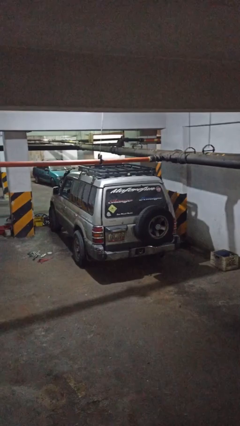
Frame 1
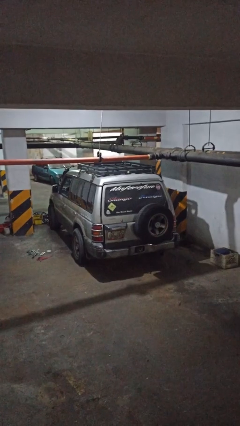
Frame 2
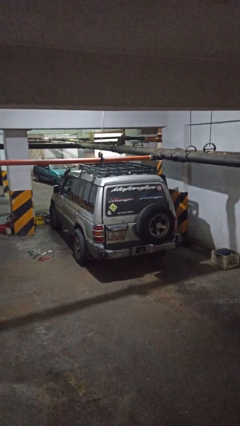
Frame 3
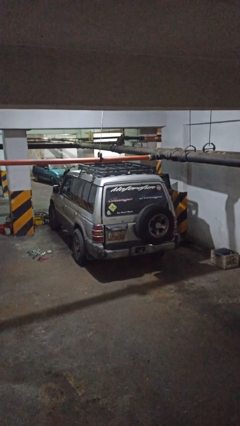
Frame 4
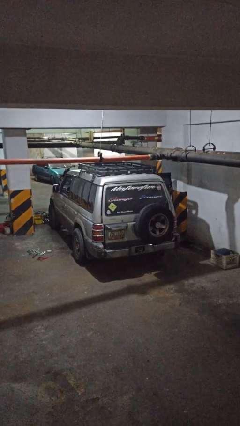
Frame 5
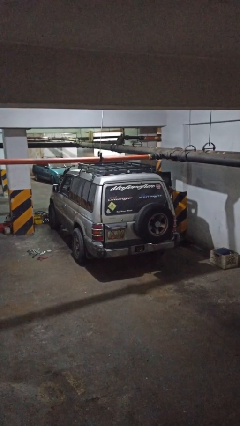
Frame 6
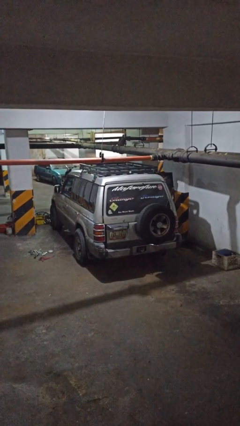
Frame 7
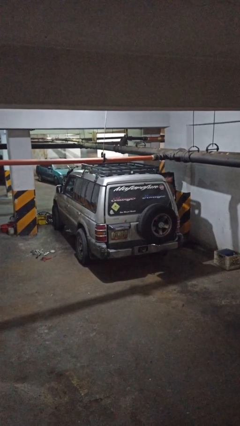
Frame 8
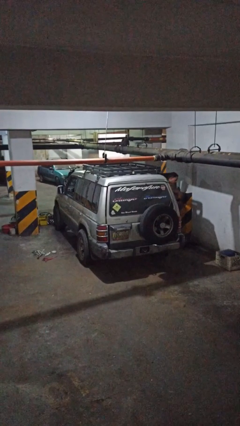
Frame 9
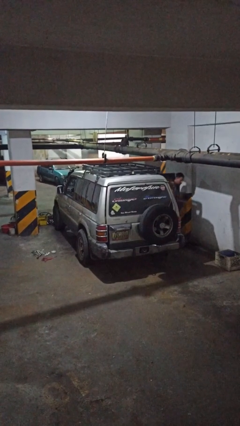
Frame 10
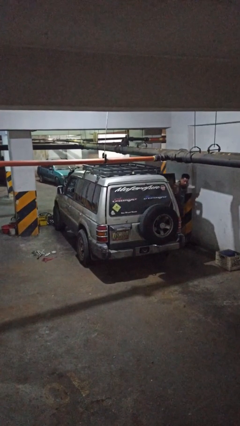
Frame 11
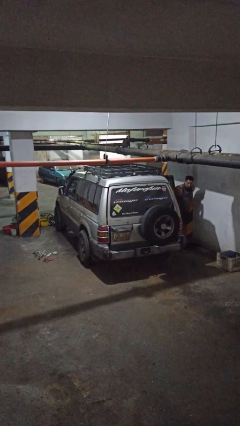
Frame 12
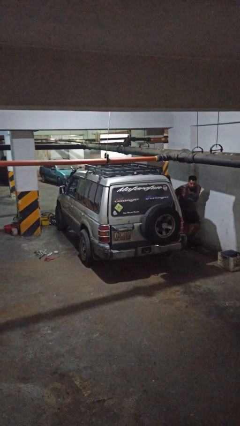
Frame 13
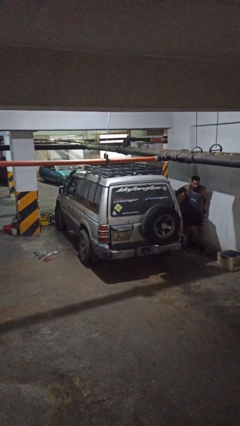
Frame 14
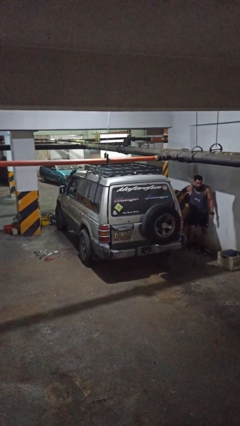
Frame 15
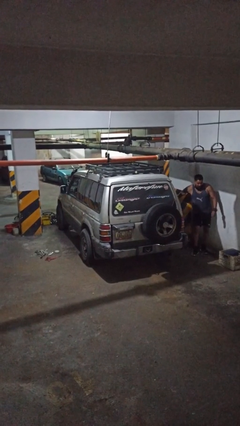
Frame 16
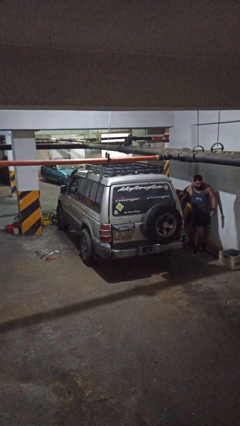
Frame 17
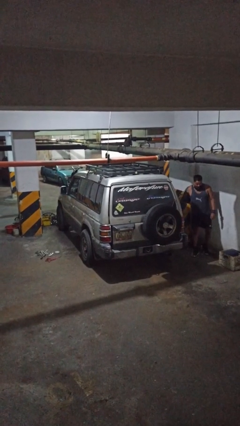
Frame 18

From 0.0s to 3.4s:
car drops off person

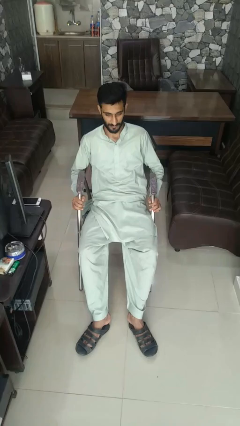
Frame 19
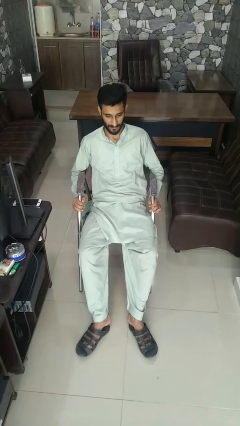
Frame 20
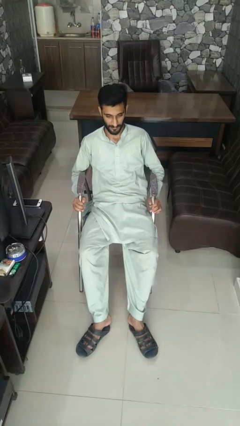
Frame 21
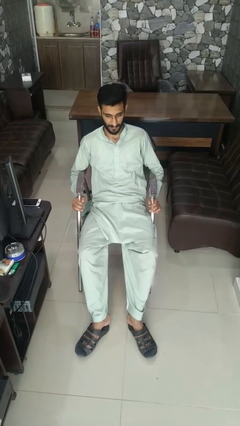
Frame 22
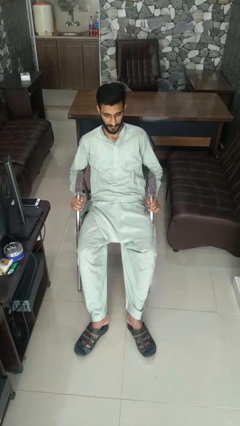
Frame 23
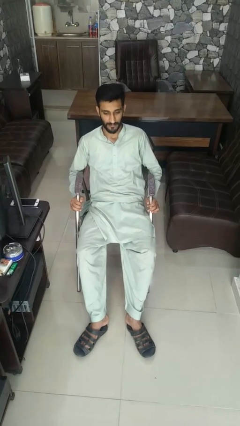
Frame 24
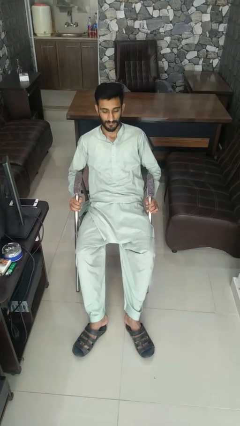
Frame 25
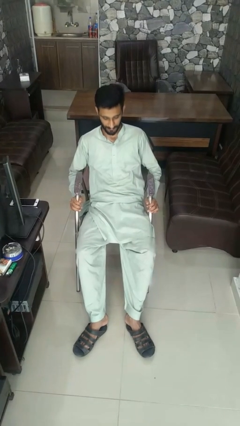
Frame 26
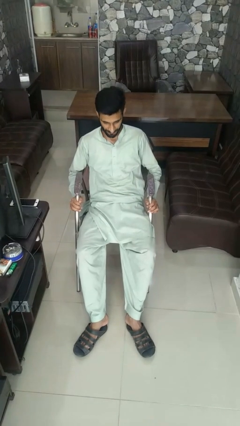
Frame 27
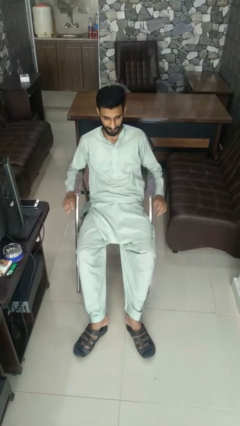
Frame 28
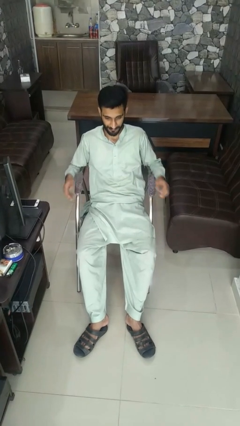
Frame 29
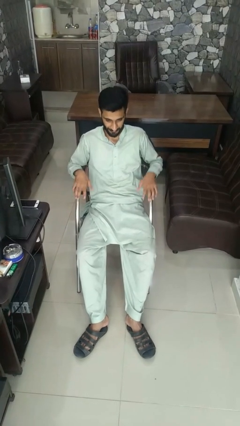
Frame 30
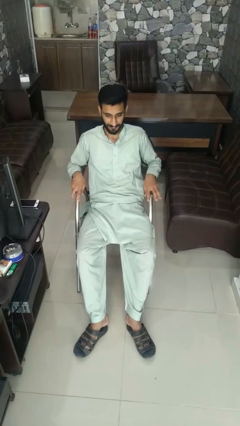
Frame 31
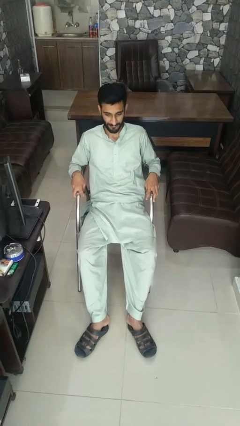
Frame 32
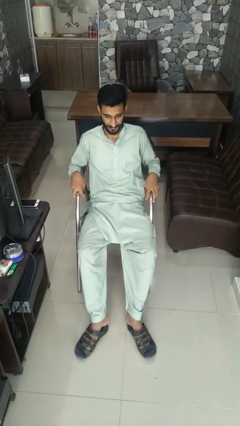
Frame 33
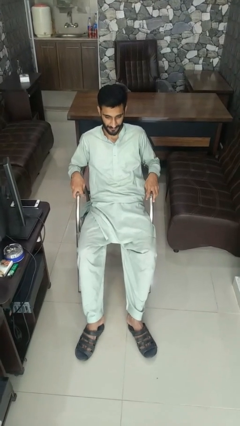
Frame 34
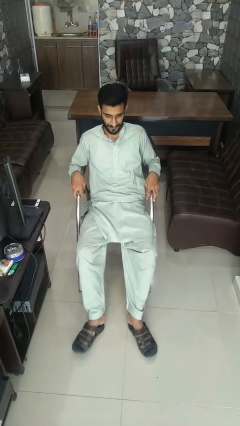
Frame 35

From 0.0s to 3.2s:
person nods head

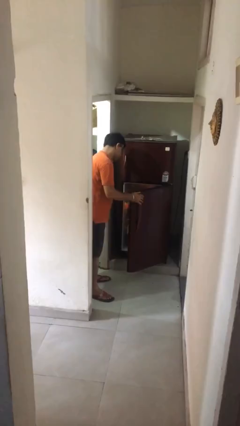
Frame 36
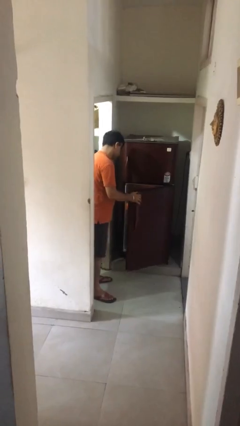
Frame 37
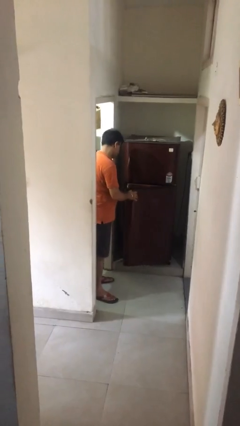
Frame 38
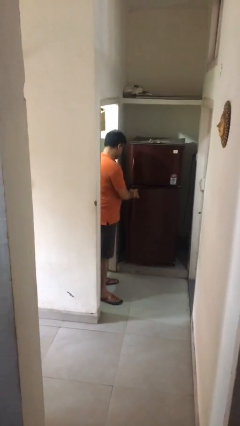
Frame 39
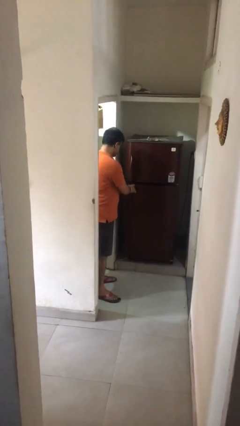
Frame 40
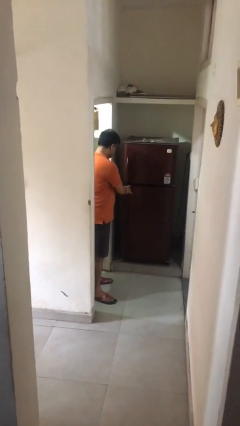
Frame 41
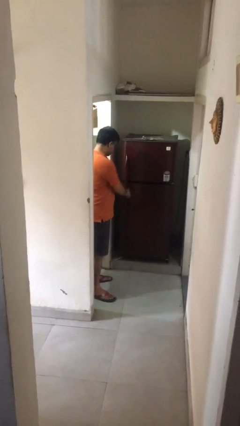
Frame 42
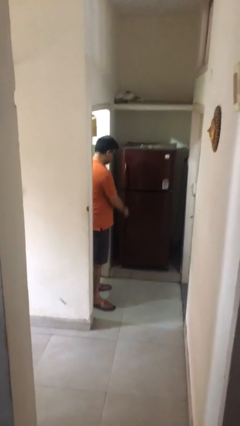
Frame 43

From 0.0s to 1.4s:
person closes refrigerator

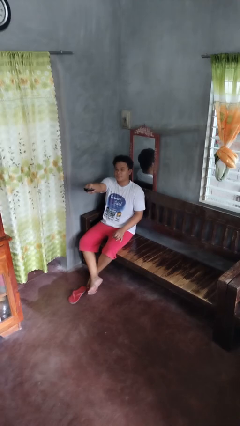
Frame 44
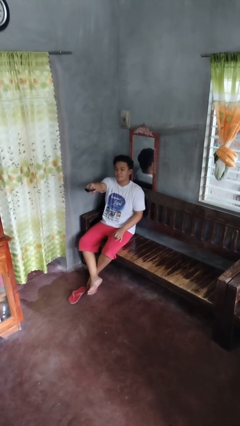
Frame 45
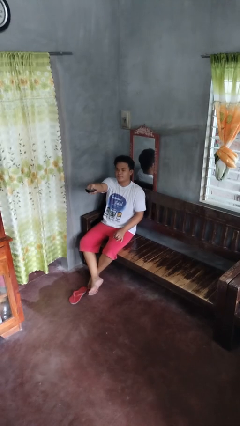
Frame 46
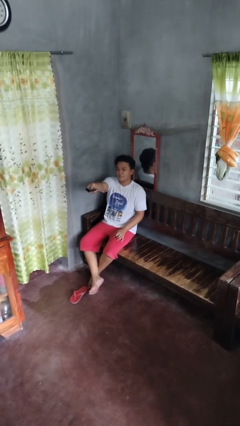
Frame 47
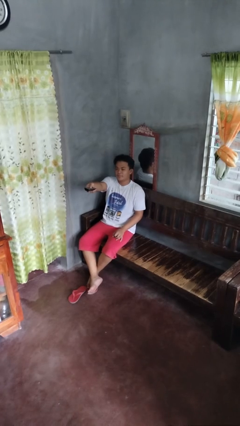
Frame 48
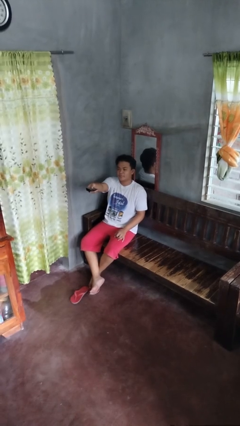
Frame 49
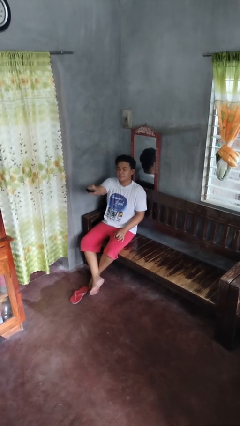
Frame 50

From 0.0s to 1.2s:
person uses television remote

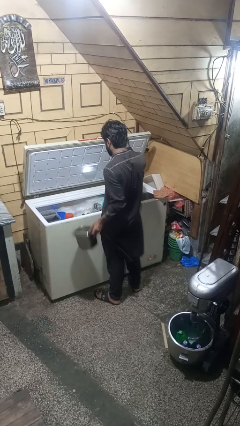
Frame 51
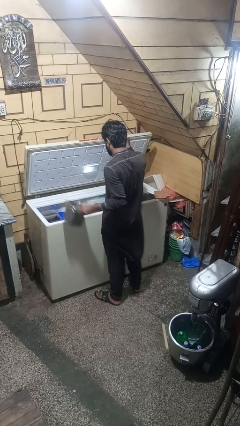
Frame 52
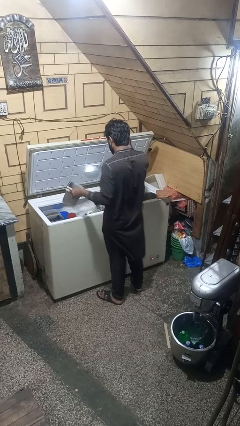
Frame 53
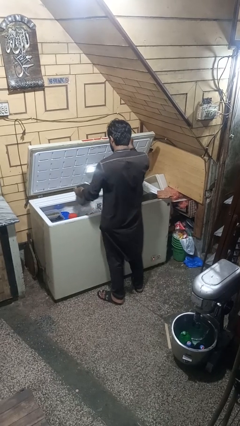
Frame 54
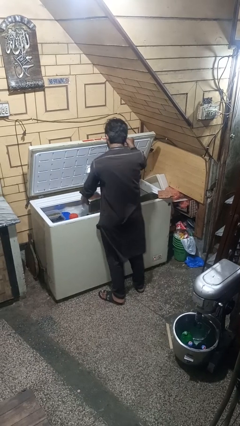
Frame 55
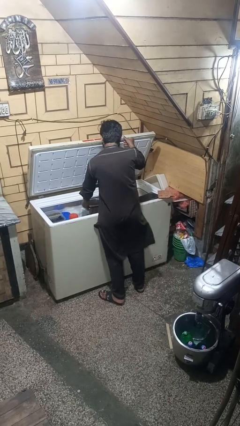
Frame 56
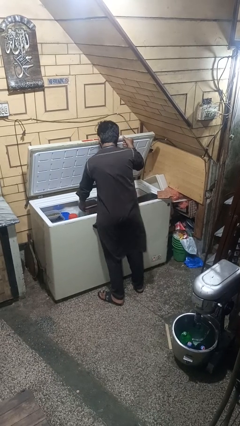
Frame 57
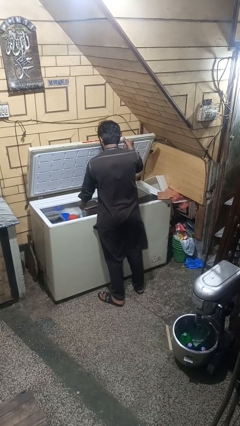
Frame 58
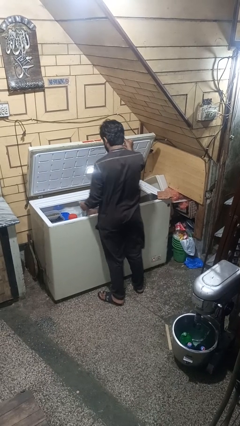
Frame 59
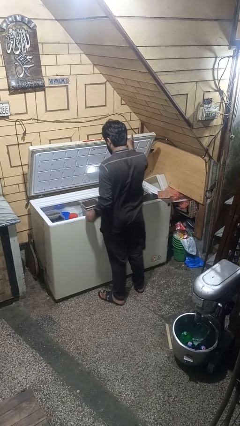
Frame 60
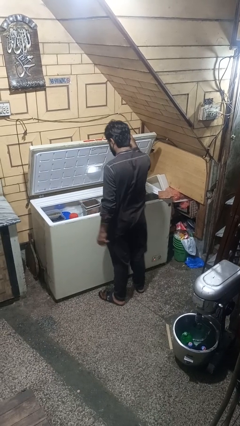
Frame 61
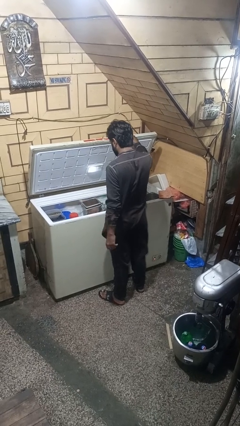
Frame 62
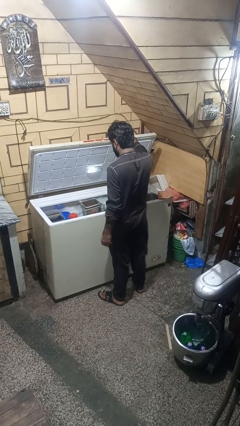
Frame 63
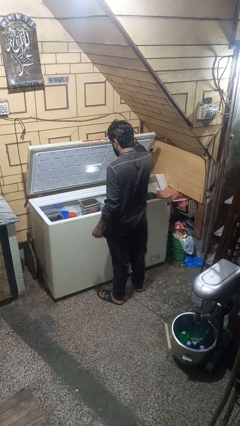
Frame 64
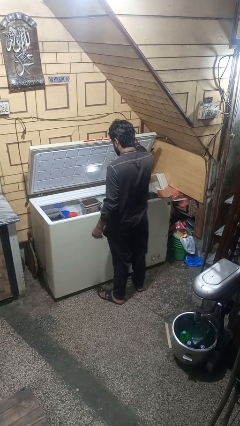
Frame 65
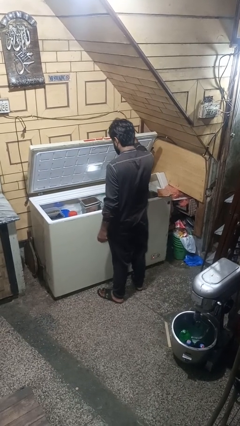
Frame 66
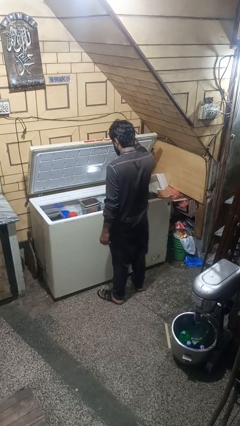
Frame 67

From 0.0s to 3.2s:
person puts object into refrigerator

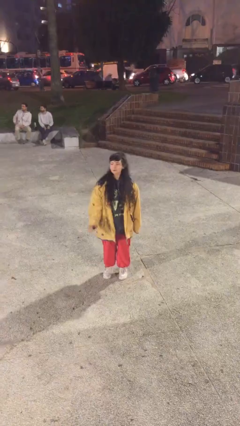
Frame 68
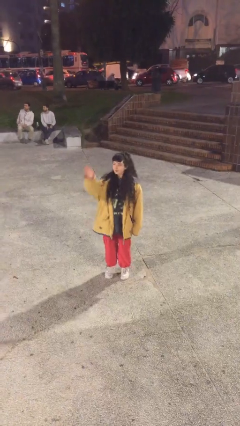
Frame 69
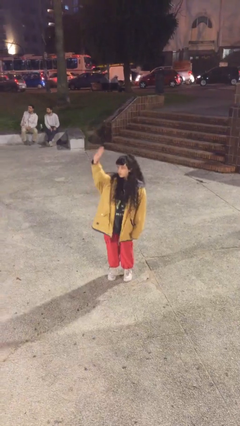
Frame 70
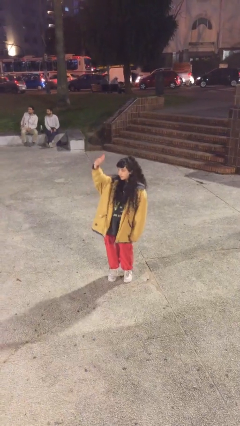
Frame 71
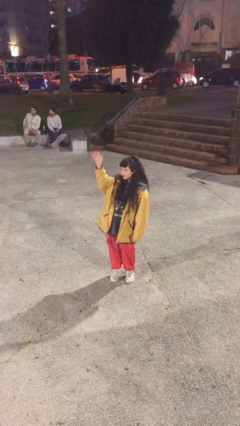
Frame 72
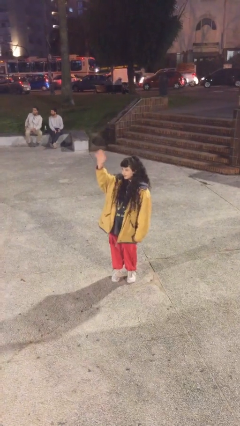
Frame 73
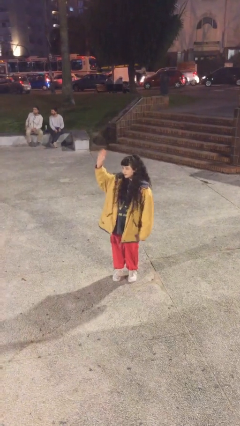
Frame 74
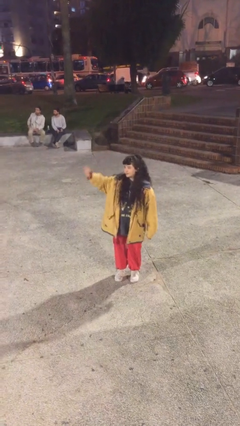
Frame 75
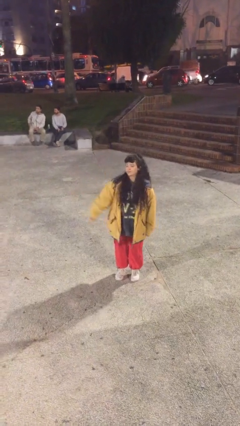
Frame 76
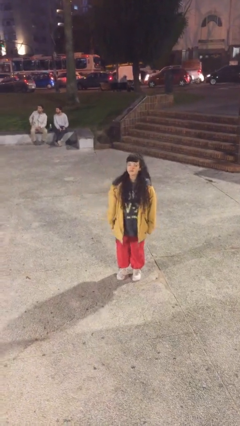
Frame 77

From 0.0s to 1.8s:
person waves at person

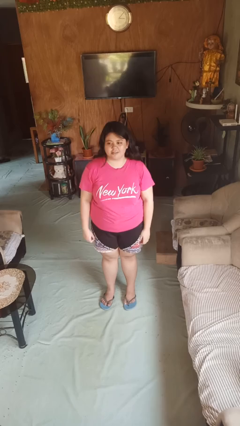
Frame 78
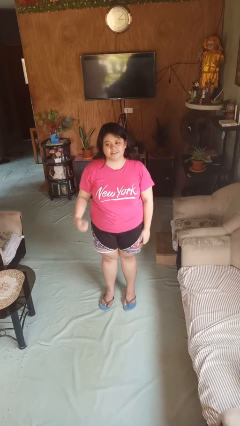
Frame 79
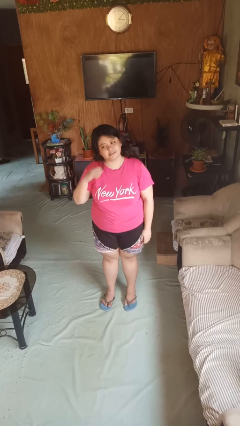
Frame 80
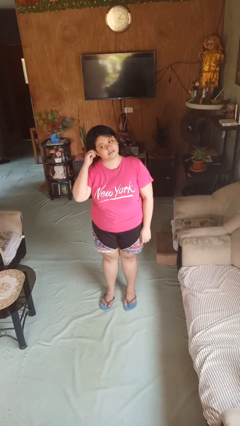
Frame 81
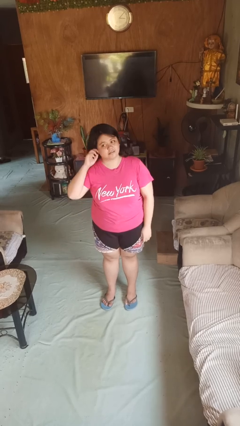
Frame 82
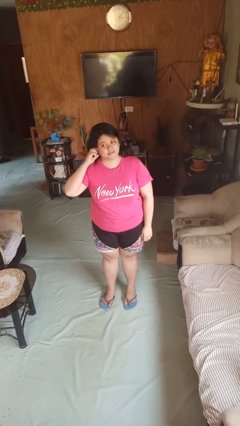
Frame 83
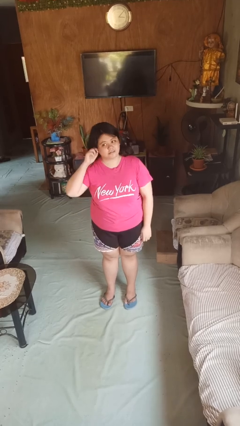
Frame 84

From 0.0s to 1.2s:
person touches earlobe

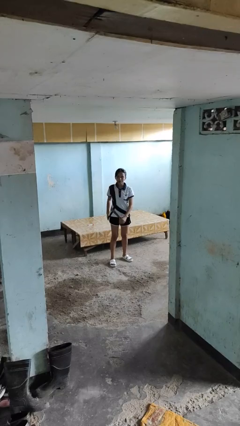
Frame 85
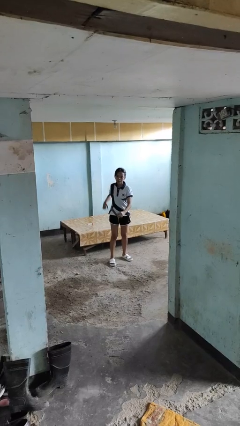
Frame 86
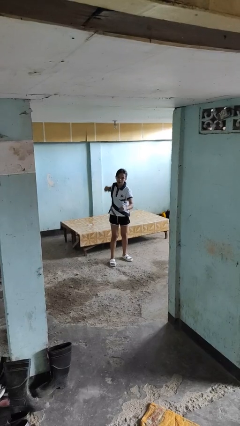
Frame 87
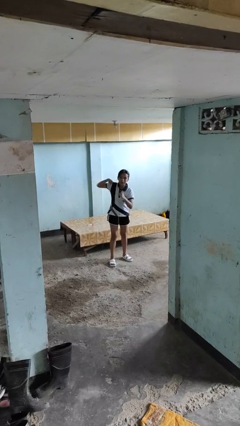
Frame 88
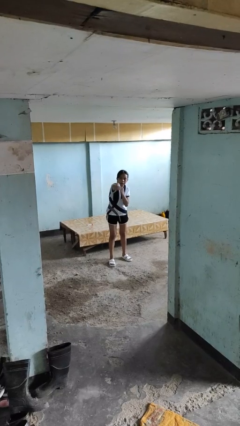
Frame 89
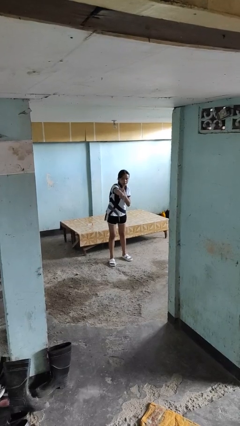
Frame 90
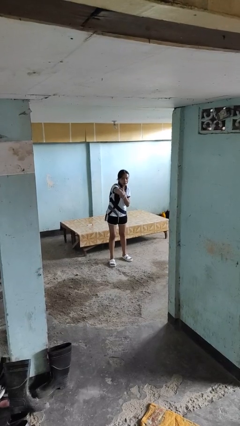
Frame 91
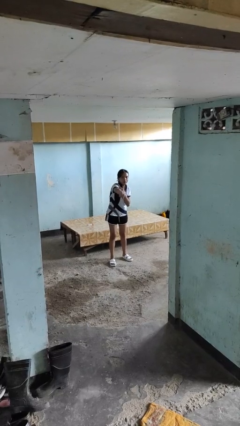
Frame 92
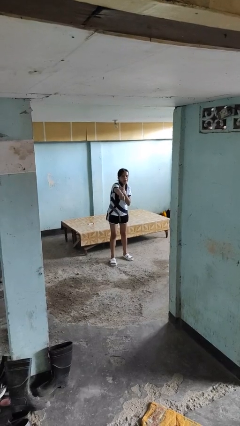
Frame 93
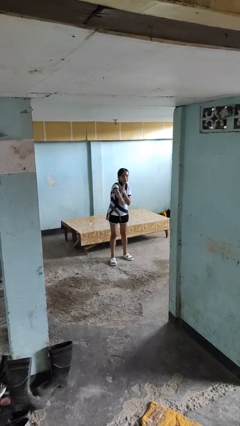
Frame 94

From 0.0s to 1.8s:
person punches
